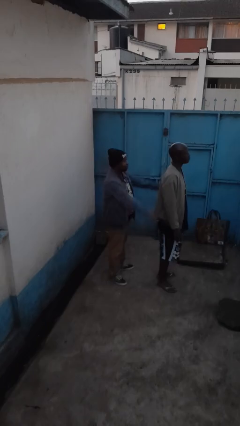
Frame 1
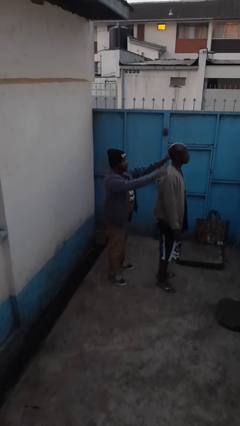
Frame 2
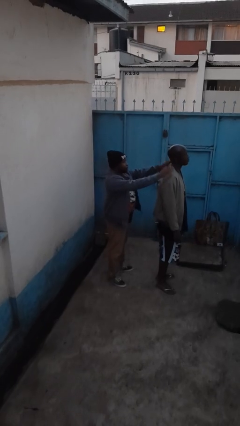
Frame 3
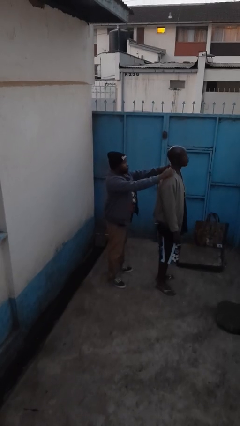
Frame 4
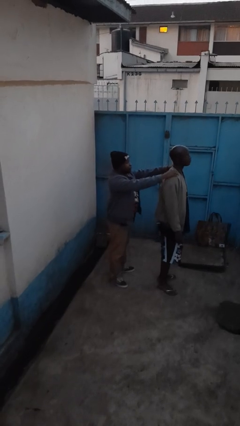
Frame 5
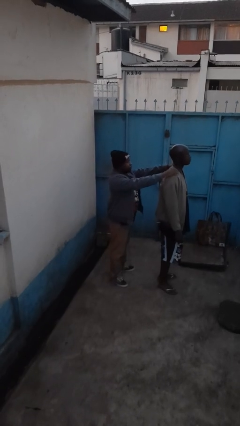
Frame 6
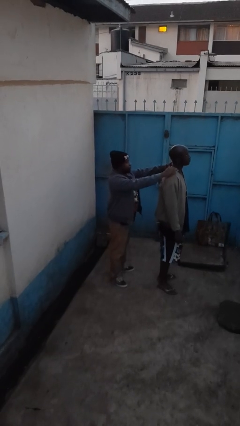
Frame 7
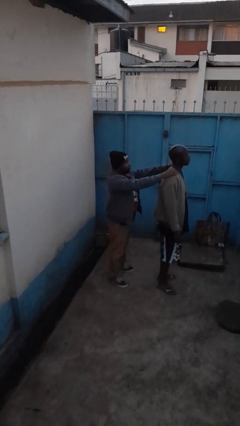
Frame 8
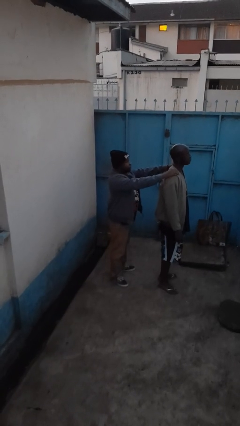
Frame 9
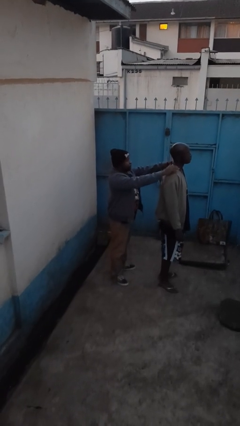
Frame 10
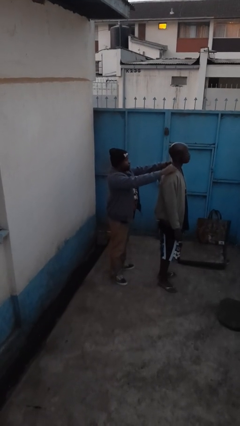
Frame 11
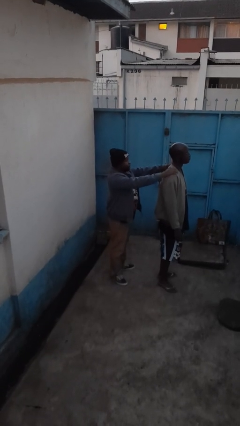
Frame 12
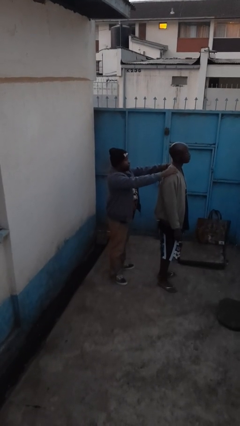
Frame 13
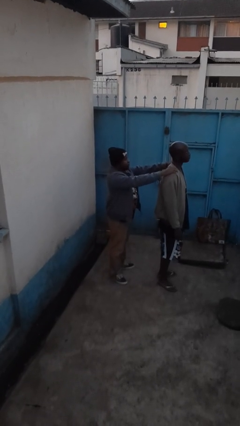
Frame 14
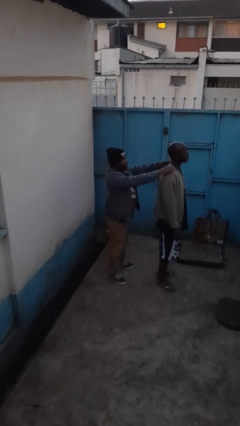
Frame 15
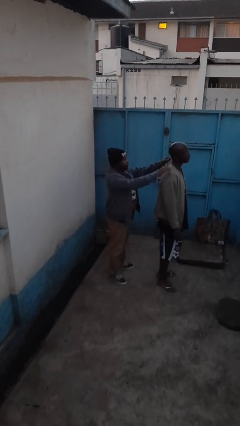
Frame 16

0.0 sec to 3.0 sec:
person pounds shoulders of person

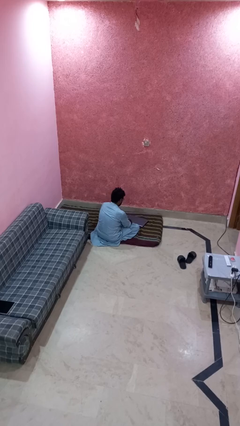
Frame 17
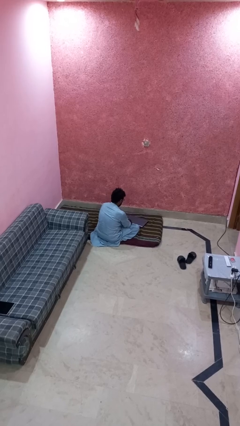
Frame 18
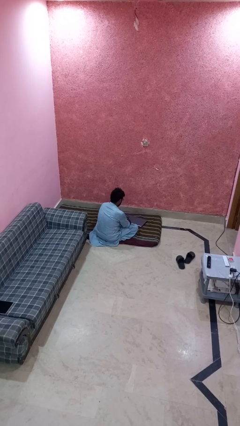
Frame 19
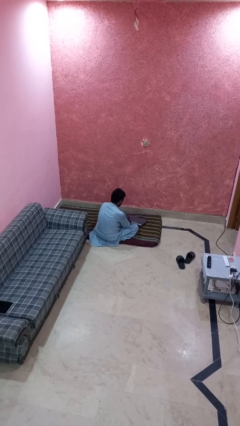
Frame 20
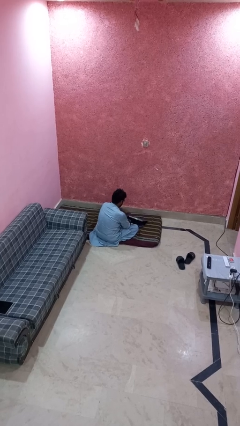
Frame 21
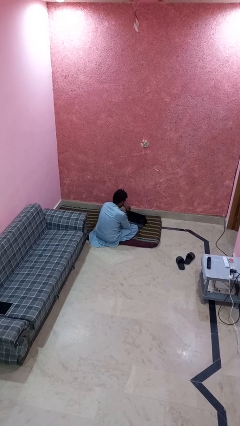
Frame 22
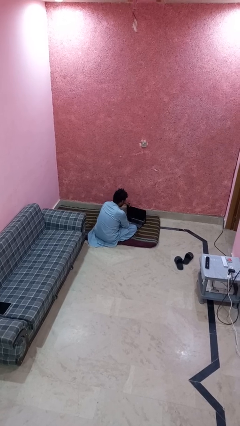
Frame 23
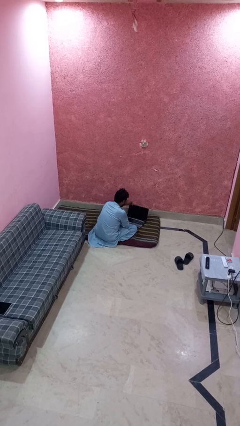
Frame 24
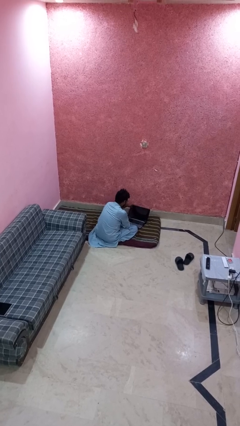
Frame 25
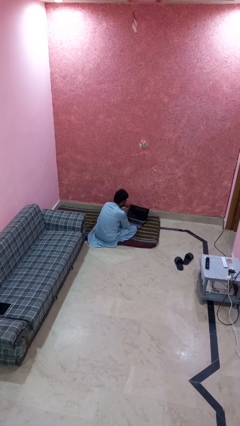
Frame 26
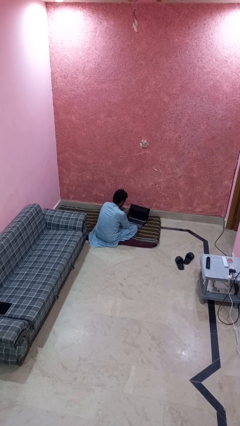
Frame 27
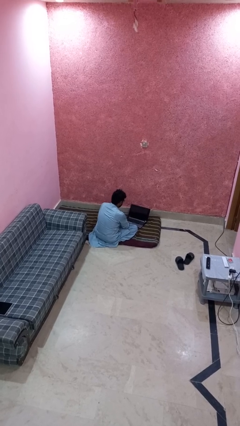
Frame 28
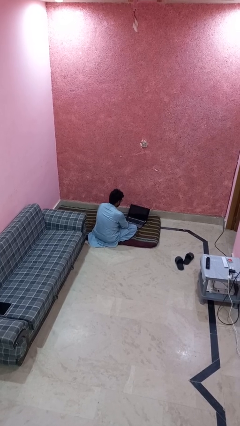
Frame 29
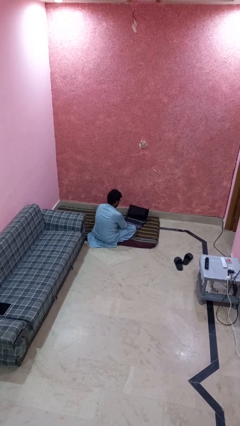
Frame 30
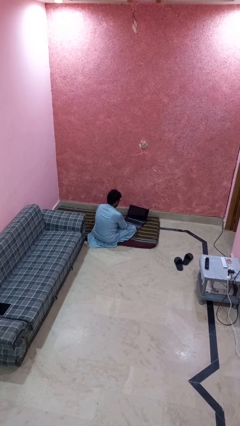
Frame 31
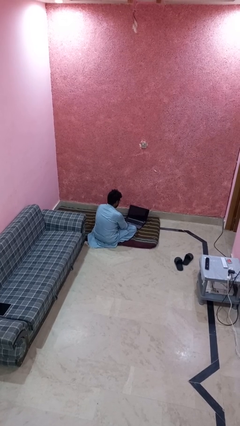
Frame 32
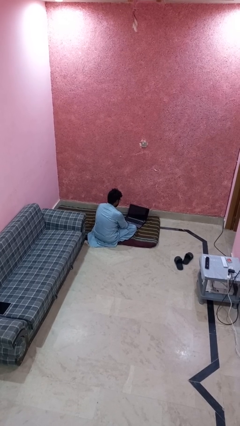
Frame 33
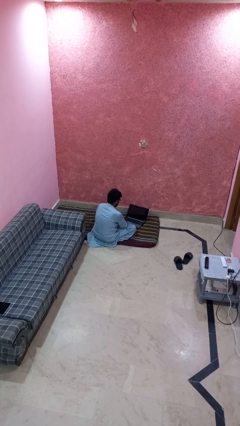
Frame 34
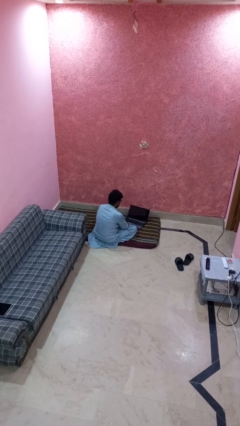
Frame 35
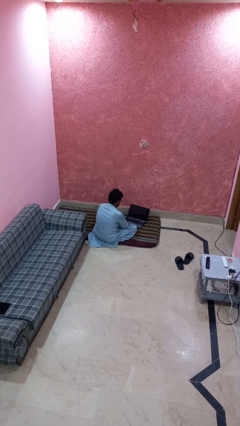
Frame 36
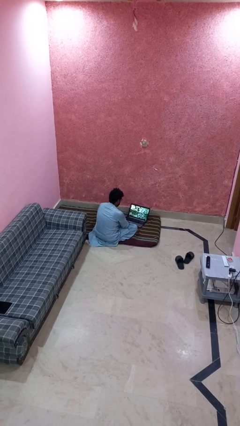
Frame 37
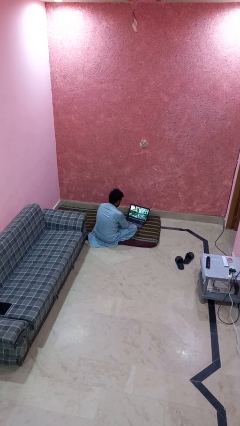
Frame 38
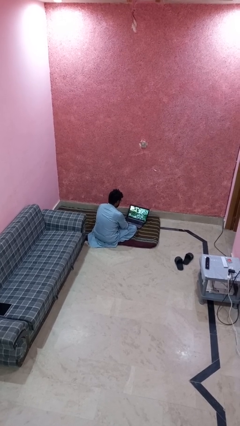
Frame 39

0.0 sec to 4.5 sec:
person opens laptop

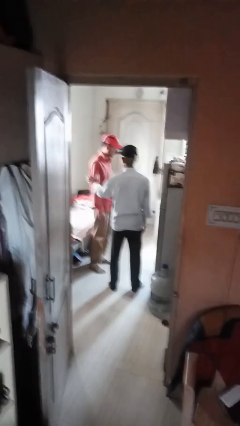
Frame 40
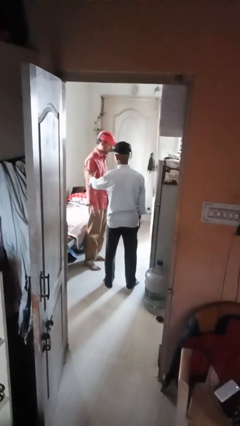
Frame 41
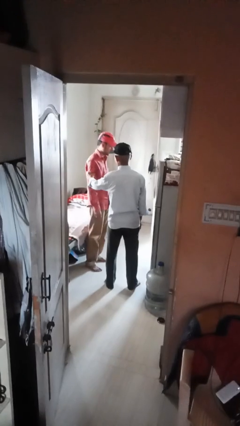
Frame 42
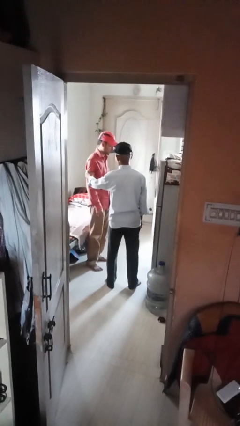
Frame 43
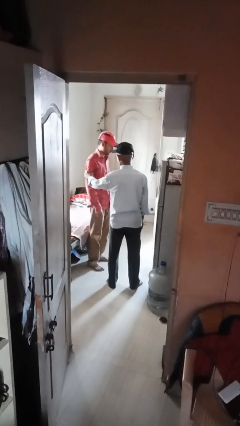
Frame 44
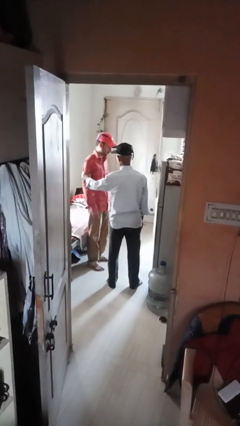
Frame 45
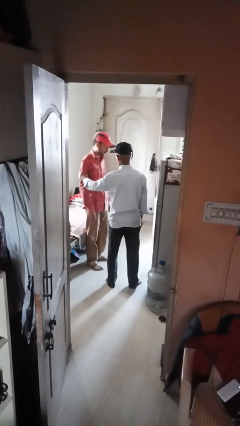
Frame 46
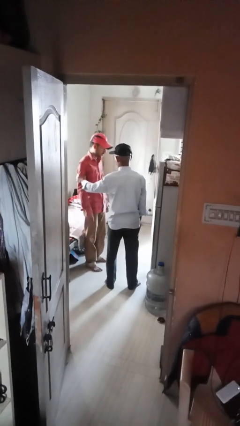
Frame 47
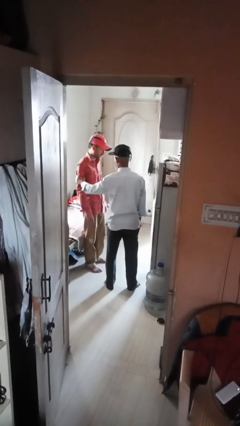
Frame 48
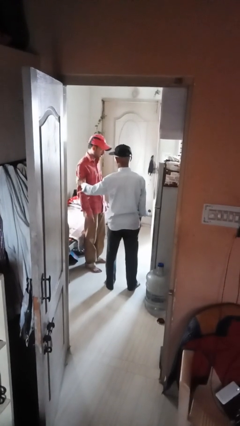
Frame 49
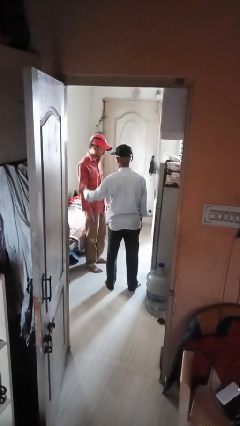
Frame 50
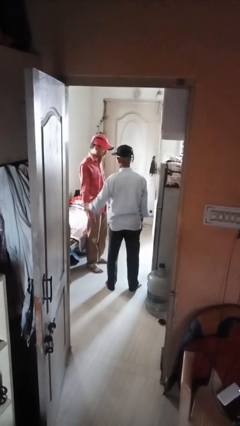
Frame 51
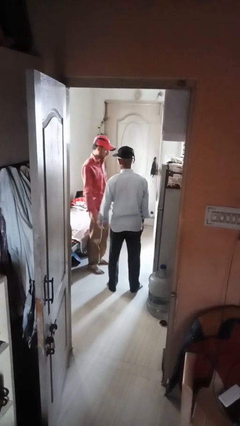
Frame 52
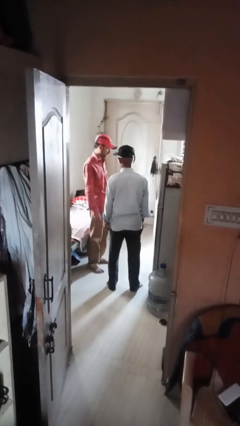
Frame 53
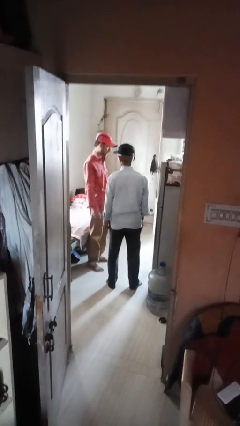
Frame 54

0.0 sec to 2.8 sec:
person grabs person by bicep

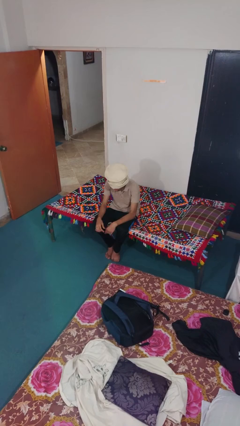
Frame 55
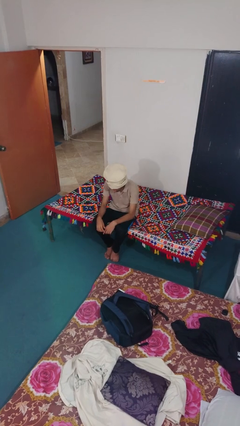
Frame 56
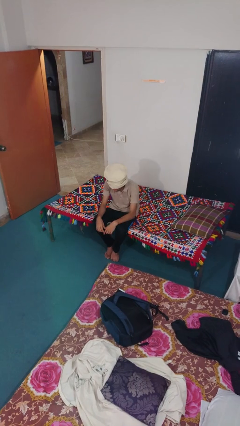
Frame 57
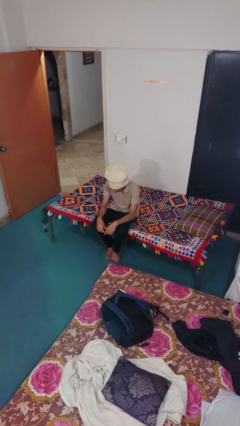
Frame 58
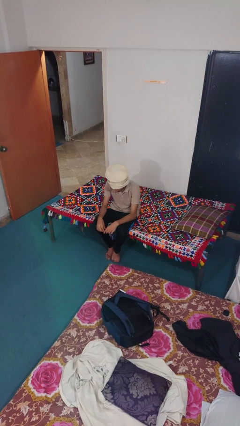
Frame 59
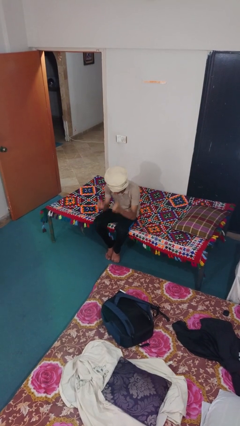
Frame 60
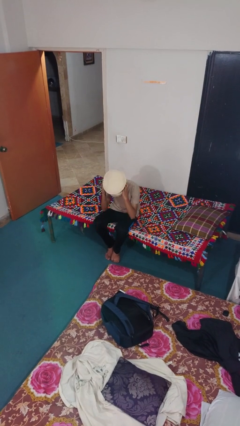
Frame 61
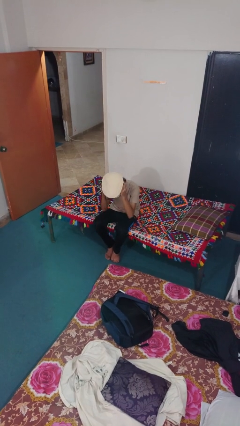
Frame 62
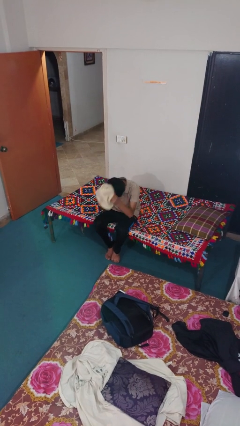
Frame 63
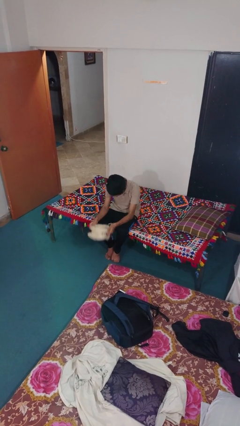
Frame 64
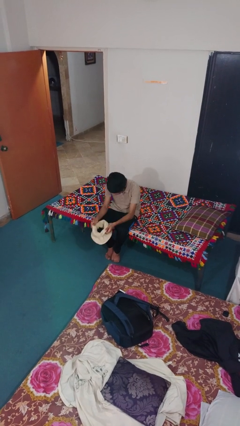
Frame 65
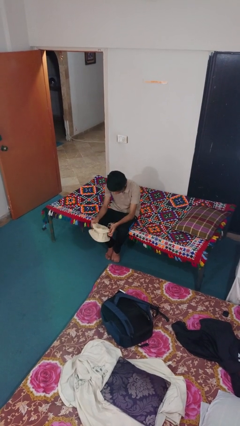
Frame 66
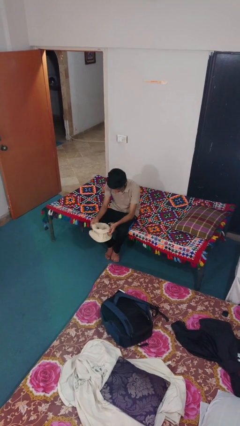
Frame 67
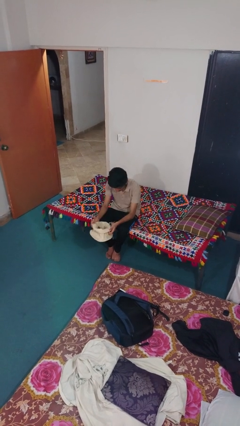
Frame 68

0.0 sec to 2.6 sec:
person takes off hat

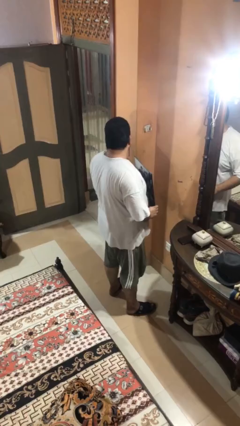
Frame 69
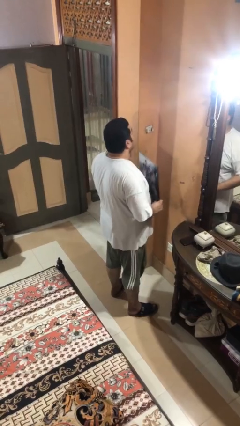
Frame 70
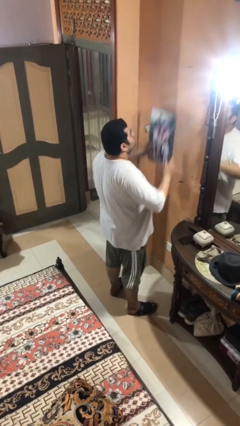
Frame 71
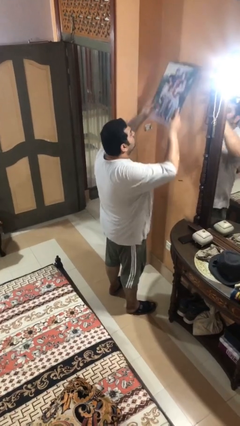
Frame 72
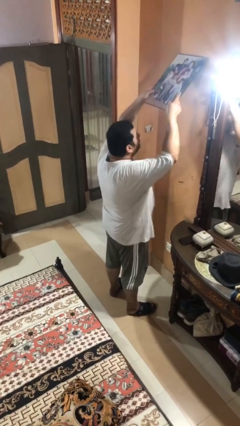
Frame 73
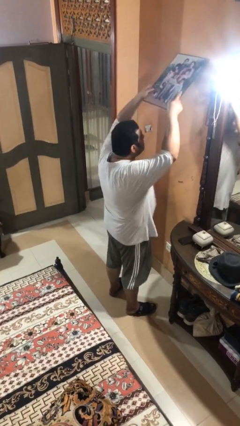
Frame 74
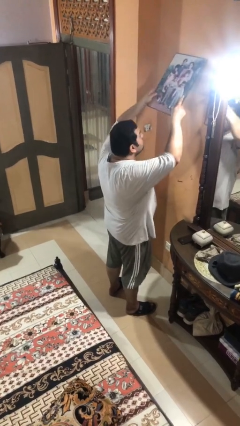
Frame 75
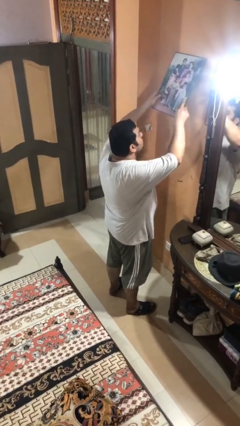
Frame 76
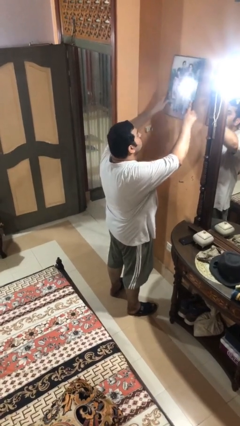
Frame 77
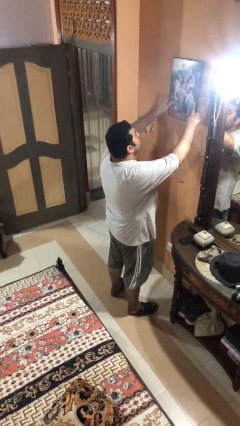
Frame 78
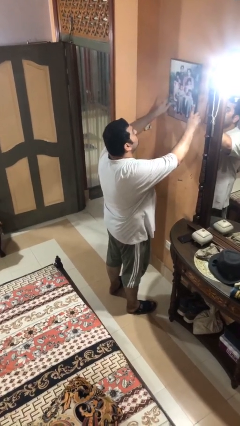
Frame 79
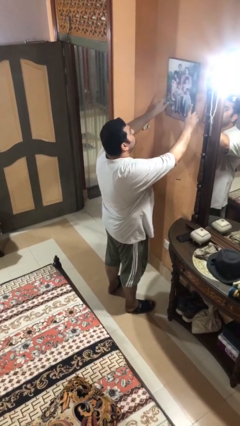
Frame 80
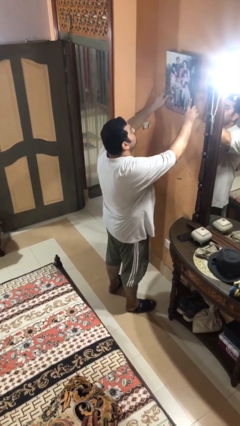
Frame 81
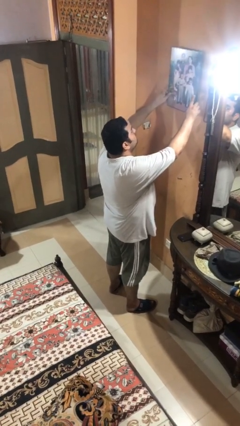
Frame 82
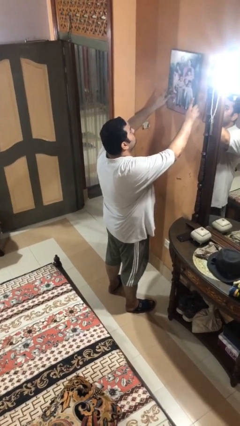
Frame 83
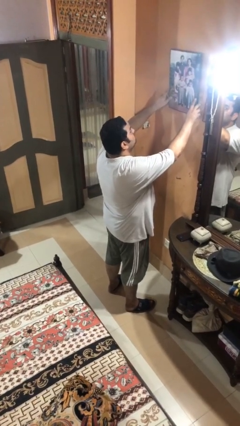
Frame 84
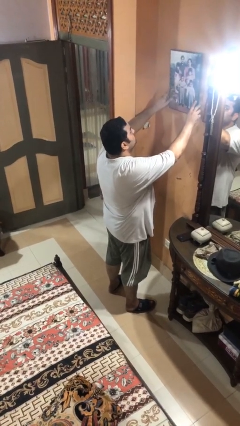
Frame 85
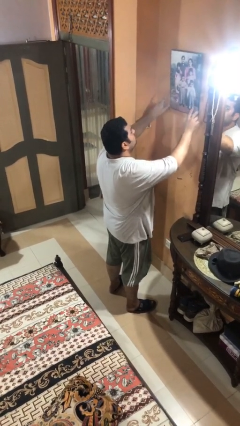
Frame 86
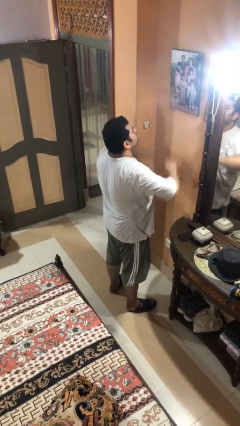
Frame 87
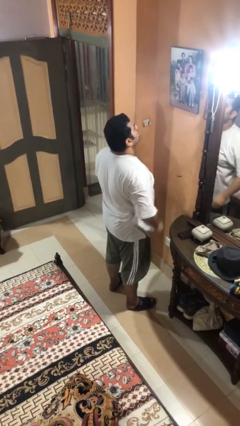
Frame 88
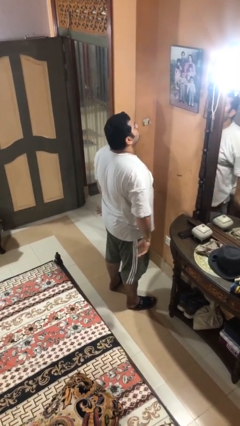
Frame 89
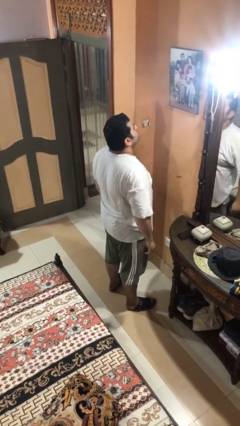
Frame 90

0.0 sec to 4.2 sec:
person puts up picture frame

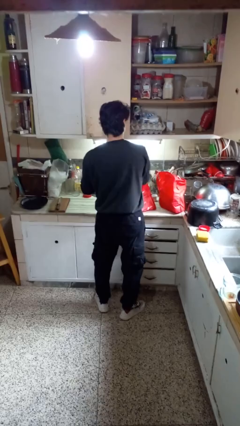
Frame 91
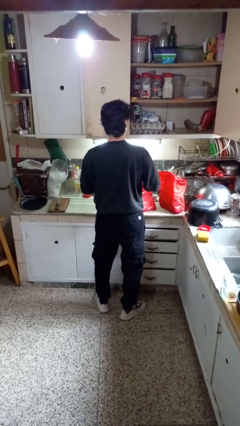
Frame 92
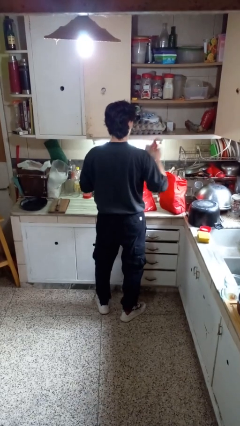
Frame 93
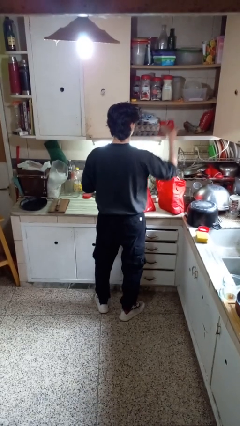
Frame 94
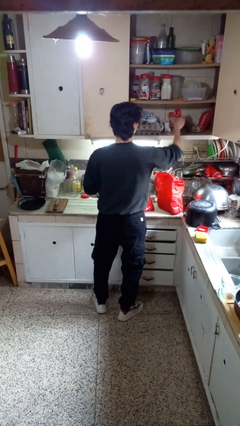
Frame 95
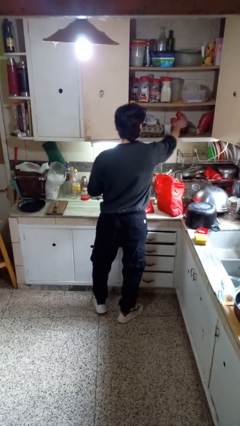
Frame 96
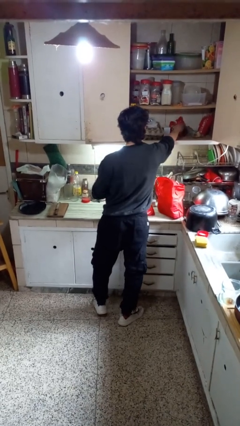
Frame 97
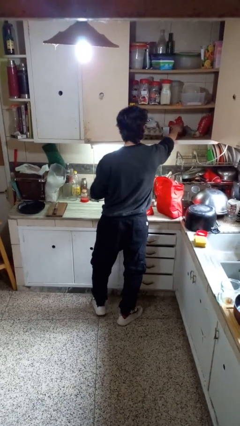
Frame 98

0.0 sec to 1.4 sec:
person loads groceries into cabinet
